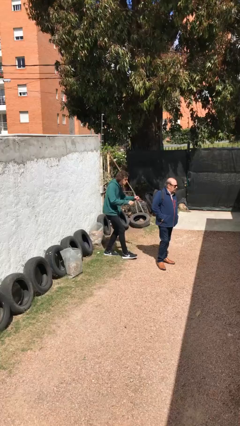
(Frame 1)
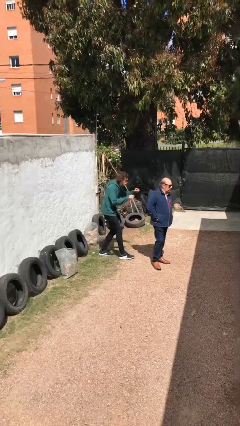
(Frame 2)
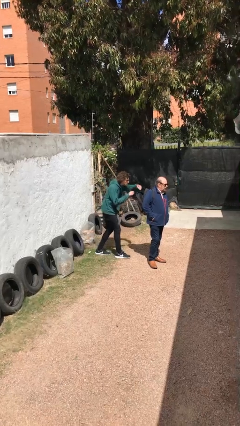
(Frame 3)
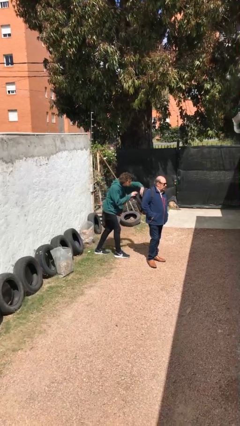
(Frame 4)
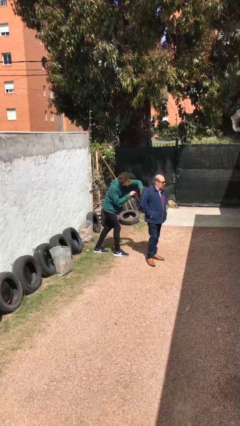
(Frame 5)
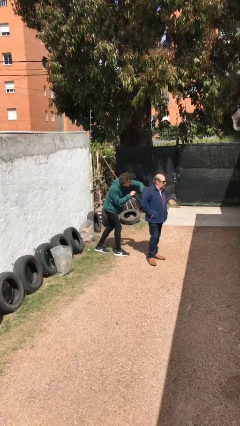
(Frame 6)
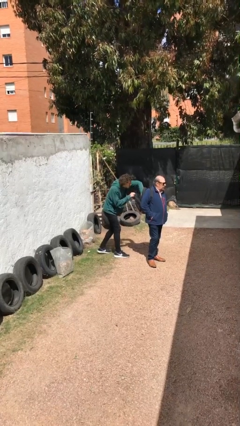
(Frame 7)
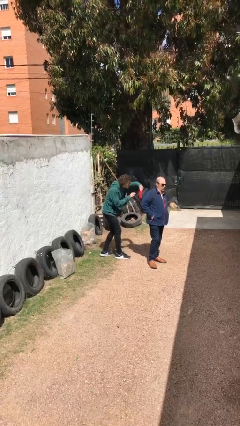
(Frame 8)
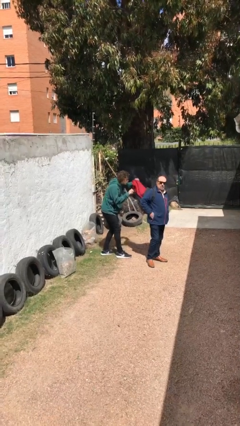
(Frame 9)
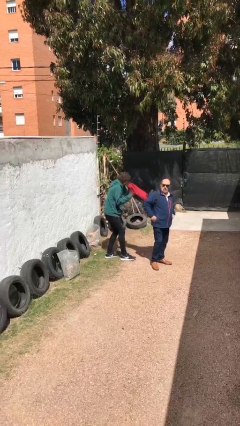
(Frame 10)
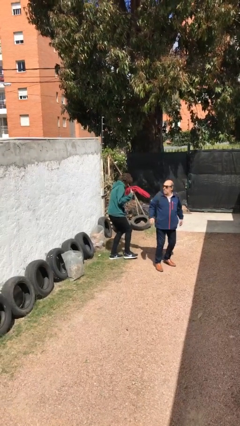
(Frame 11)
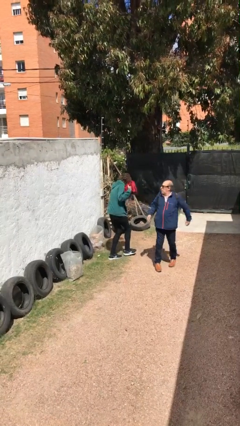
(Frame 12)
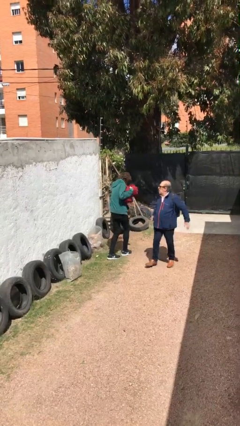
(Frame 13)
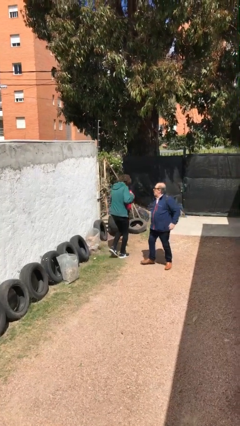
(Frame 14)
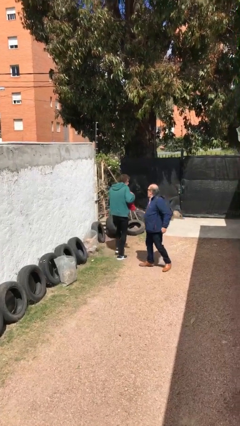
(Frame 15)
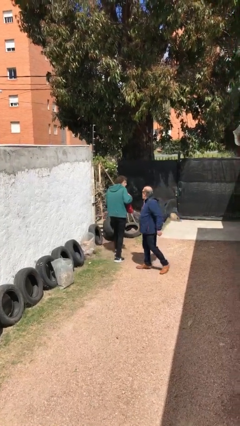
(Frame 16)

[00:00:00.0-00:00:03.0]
person steals object from person

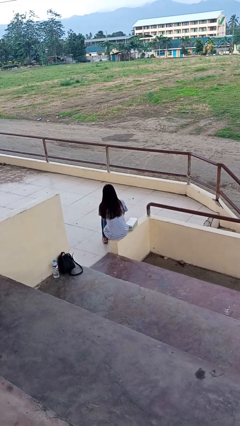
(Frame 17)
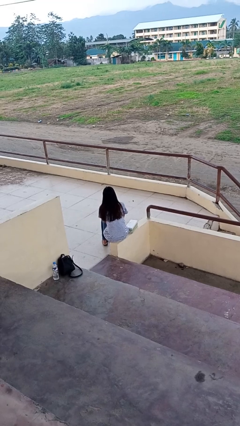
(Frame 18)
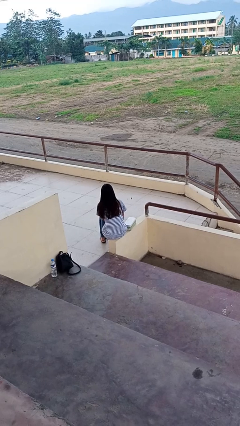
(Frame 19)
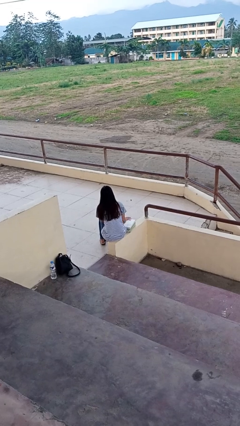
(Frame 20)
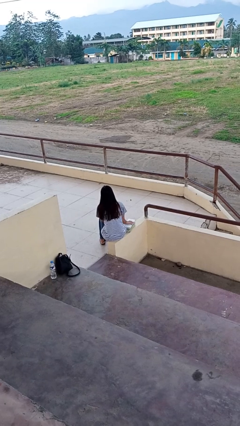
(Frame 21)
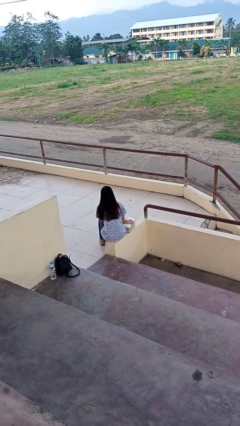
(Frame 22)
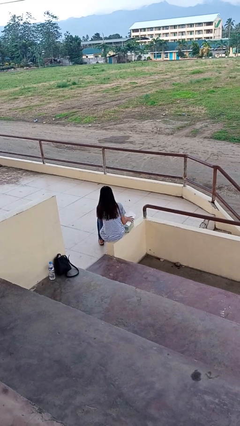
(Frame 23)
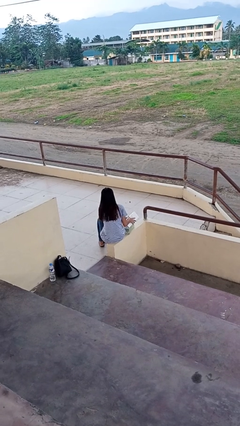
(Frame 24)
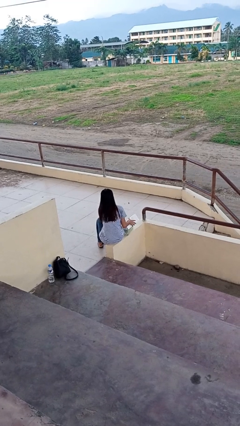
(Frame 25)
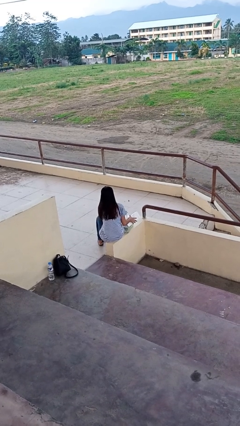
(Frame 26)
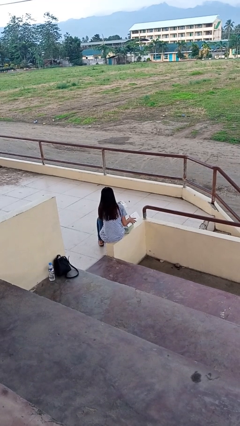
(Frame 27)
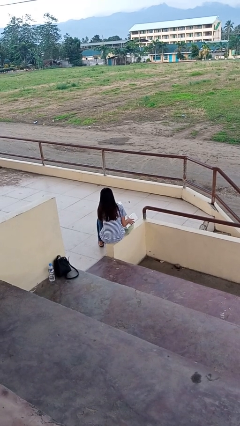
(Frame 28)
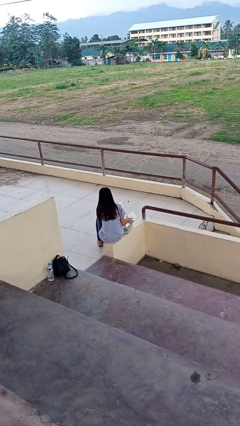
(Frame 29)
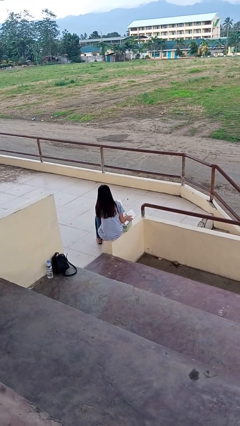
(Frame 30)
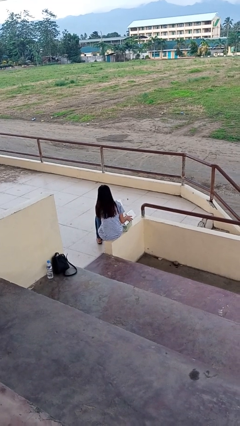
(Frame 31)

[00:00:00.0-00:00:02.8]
person takes object from box

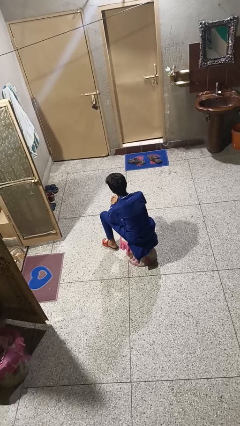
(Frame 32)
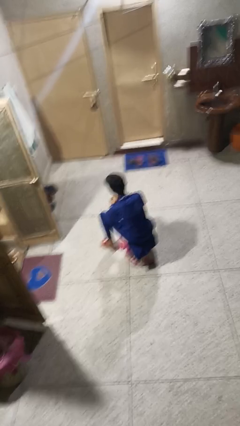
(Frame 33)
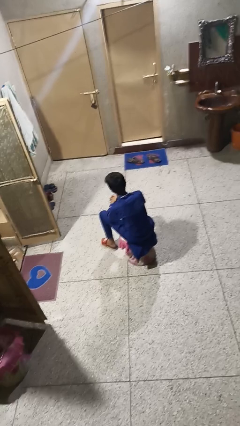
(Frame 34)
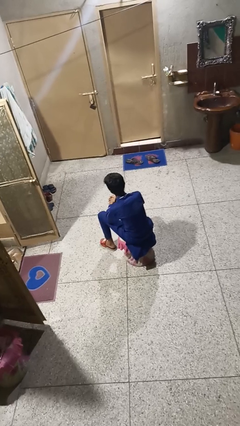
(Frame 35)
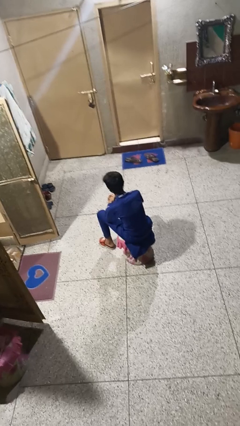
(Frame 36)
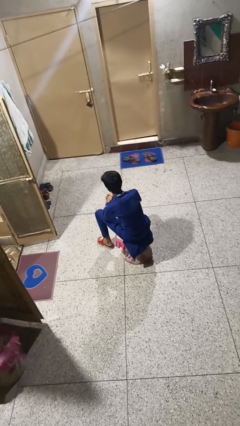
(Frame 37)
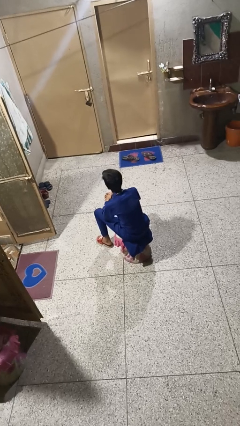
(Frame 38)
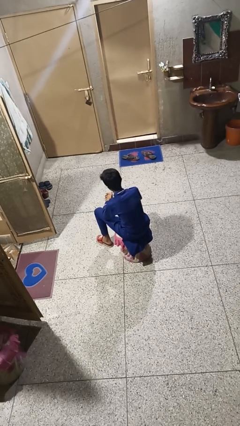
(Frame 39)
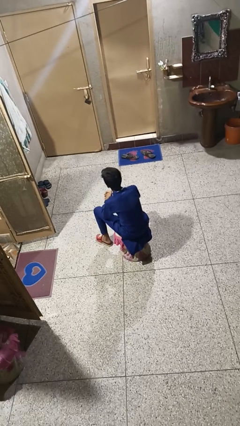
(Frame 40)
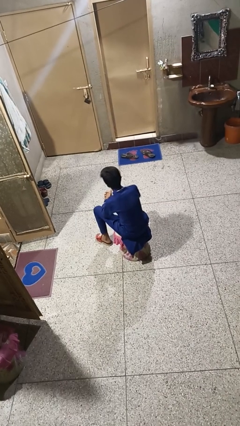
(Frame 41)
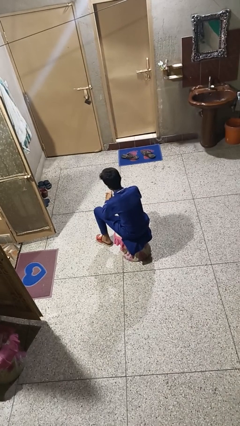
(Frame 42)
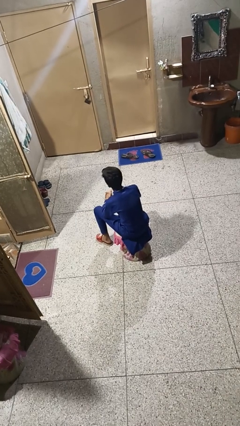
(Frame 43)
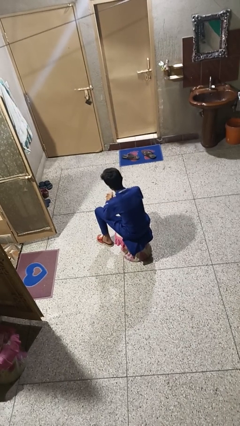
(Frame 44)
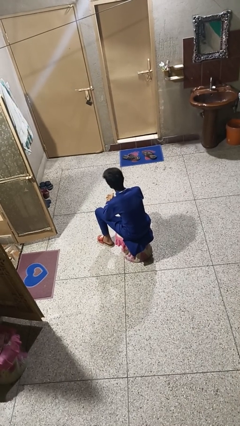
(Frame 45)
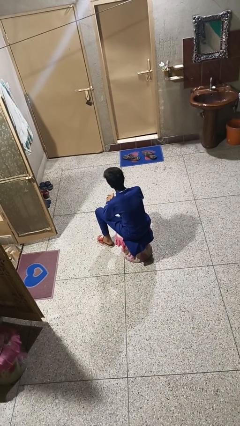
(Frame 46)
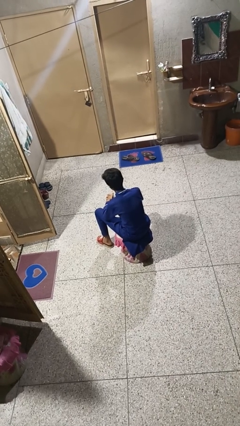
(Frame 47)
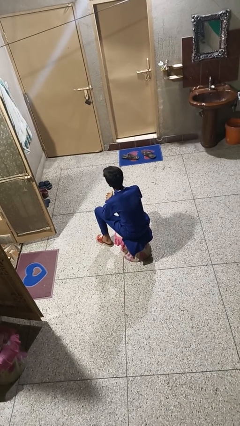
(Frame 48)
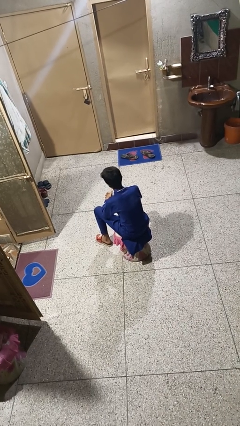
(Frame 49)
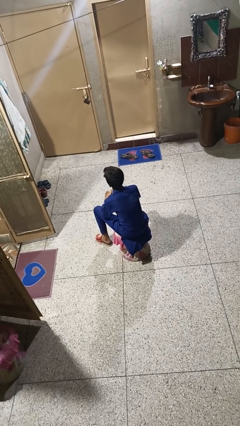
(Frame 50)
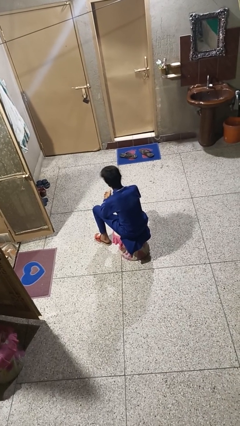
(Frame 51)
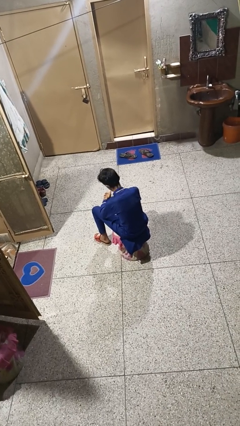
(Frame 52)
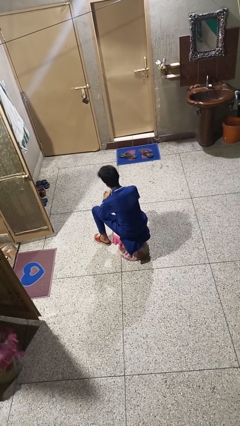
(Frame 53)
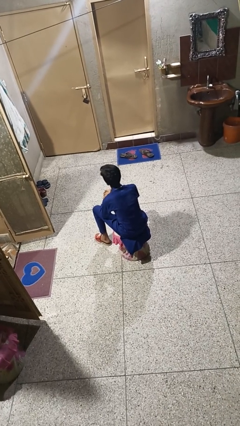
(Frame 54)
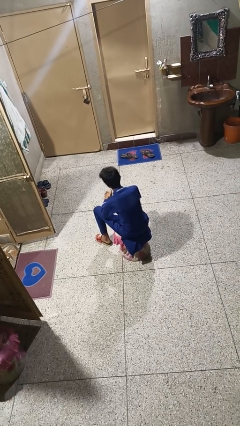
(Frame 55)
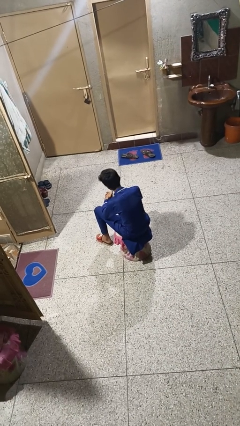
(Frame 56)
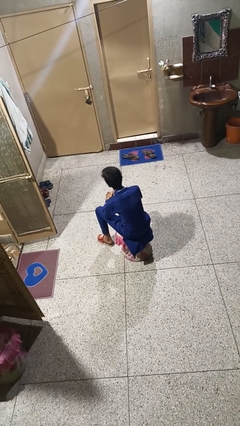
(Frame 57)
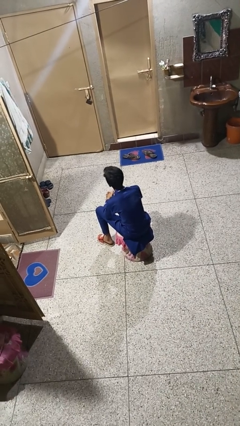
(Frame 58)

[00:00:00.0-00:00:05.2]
person nods head

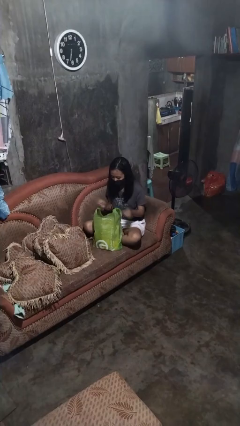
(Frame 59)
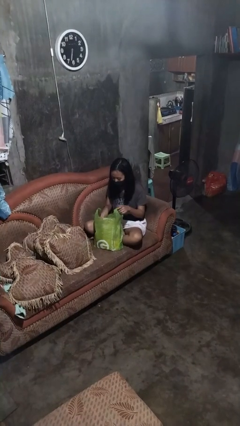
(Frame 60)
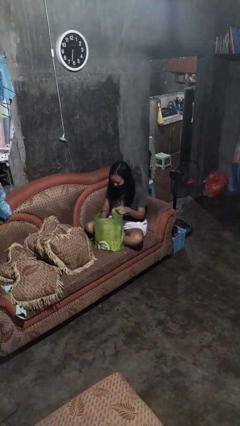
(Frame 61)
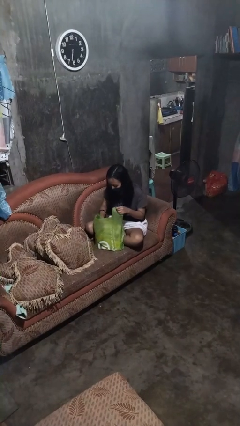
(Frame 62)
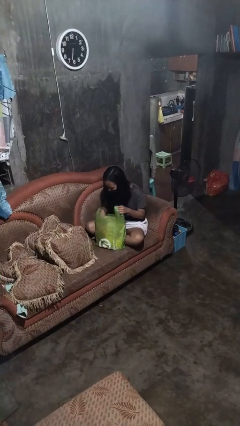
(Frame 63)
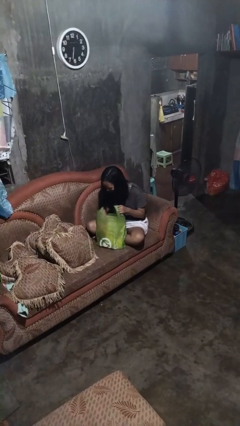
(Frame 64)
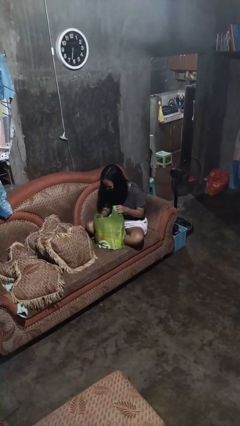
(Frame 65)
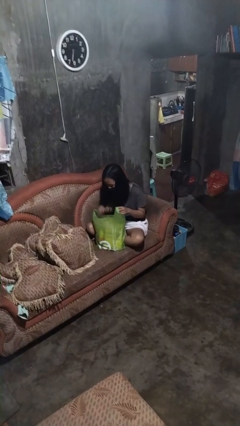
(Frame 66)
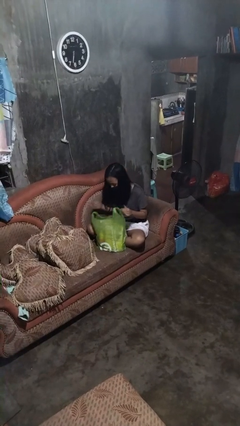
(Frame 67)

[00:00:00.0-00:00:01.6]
person searches in bag

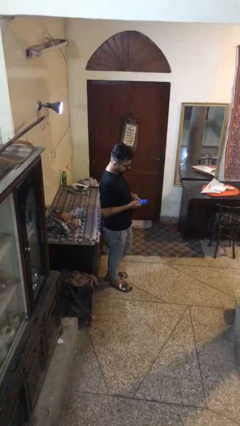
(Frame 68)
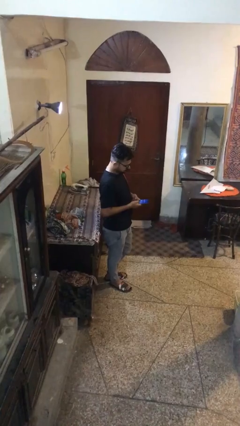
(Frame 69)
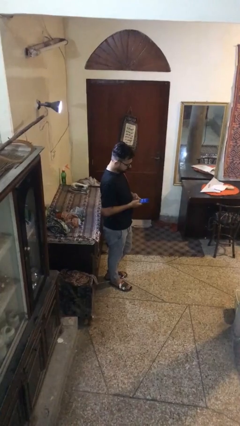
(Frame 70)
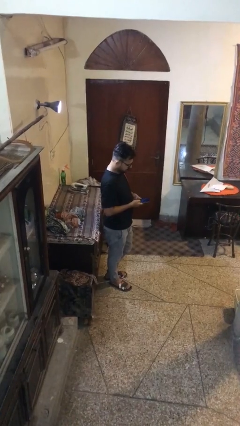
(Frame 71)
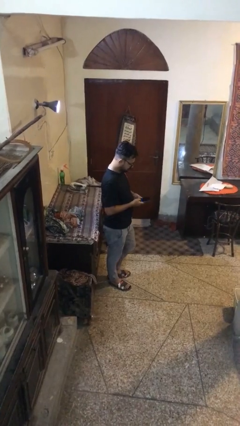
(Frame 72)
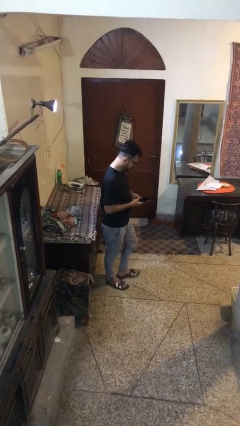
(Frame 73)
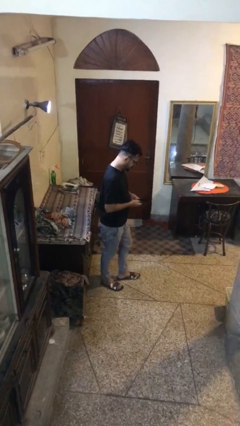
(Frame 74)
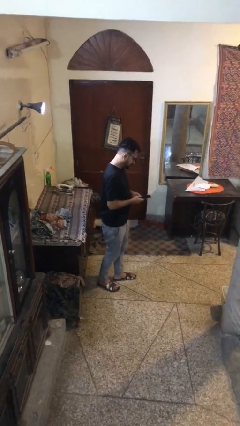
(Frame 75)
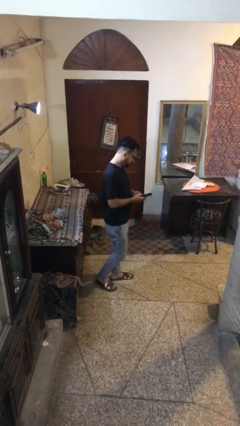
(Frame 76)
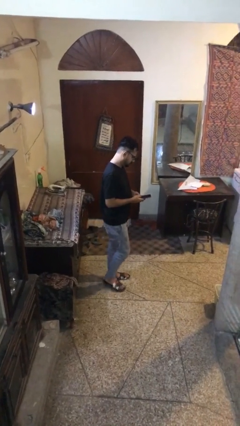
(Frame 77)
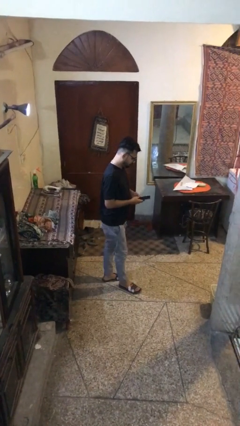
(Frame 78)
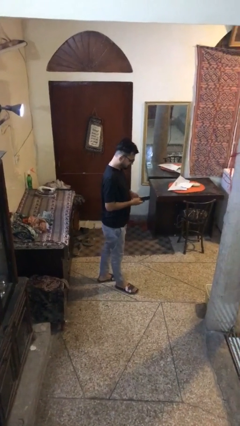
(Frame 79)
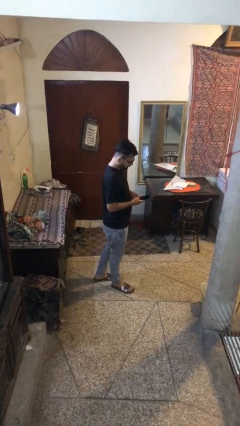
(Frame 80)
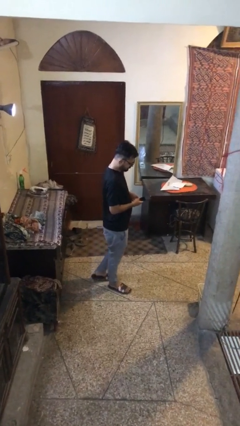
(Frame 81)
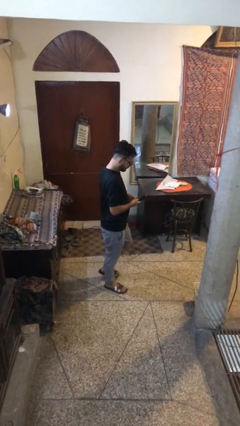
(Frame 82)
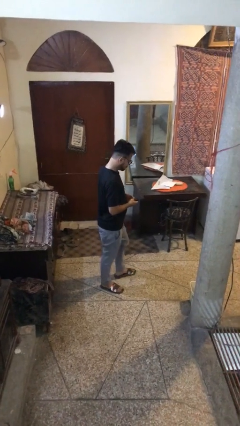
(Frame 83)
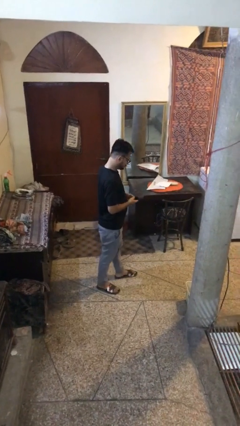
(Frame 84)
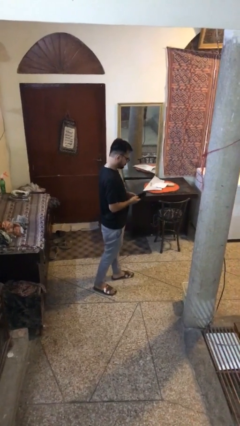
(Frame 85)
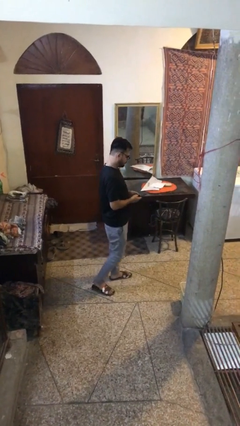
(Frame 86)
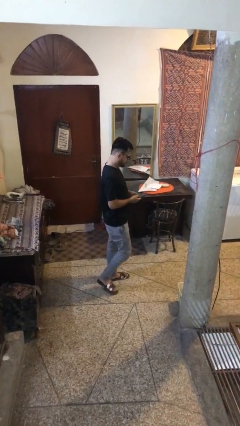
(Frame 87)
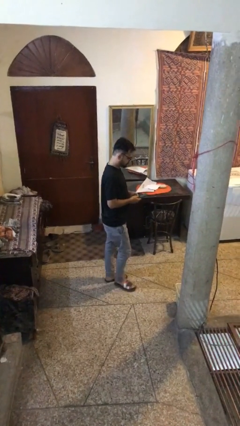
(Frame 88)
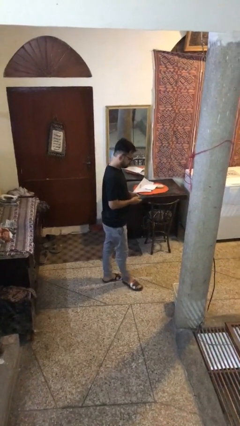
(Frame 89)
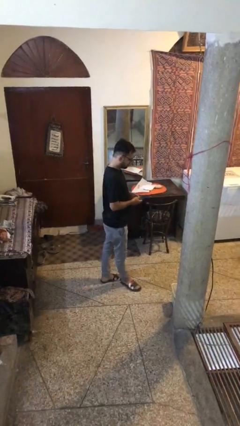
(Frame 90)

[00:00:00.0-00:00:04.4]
person texts on phone

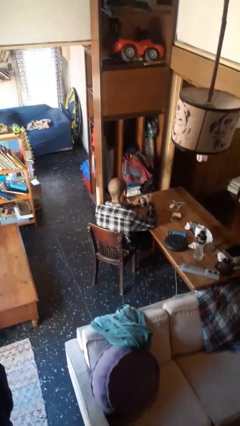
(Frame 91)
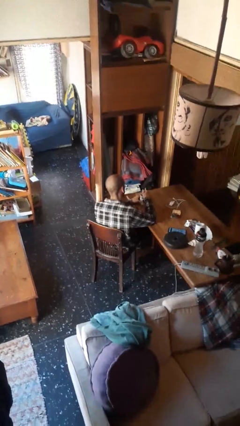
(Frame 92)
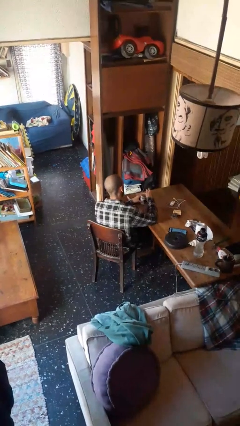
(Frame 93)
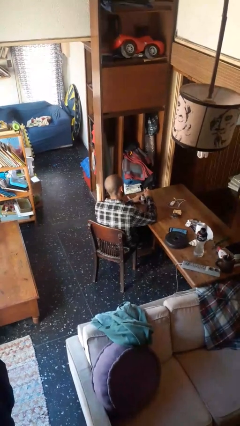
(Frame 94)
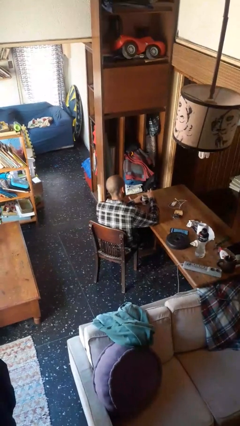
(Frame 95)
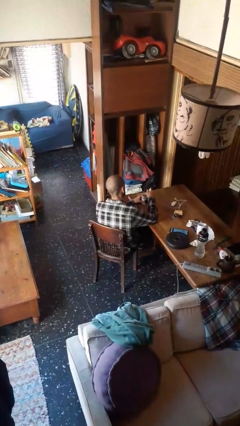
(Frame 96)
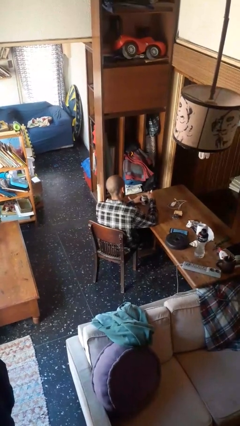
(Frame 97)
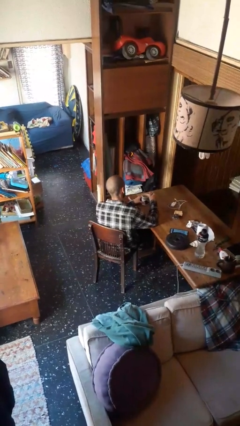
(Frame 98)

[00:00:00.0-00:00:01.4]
person stirs mug
